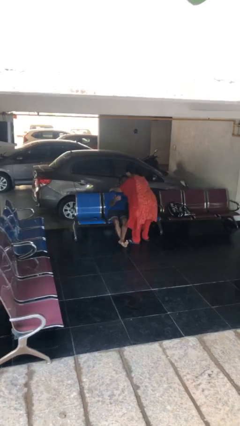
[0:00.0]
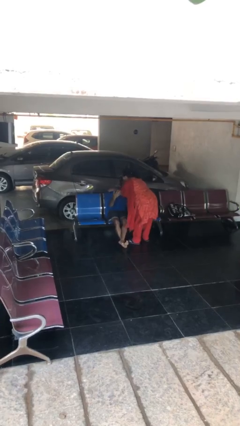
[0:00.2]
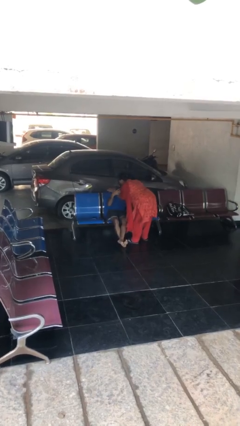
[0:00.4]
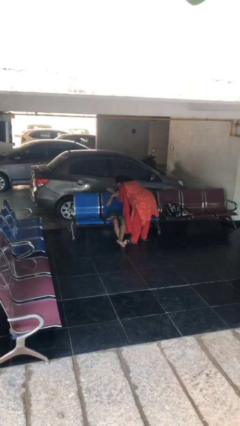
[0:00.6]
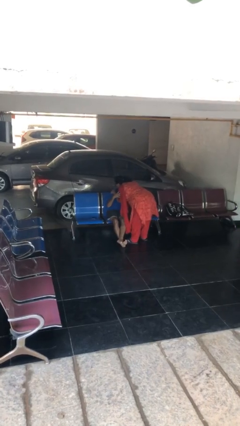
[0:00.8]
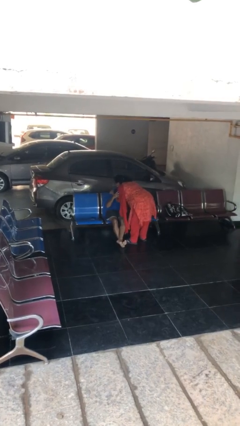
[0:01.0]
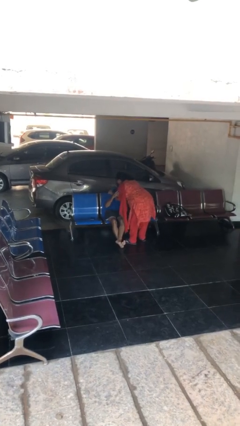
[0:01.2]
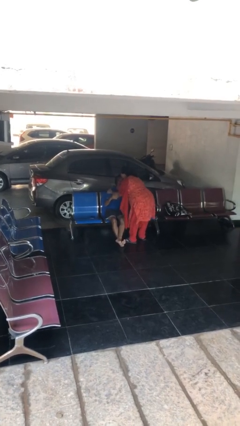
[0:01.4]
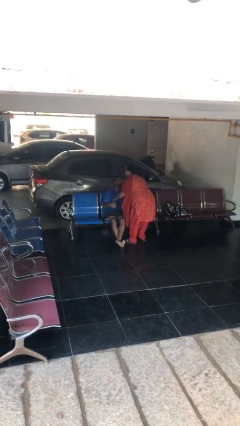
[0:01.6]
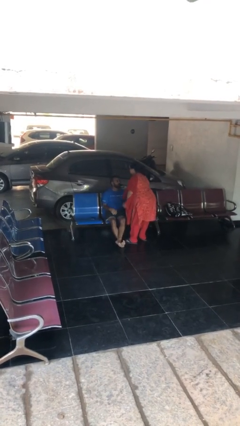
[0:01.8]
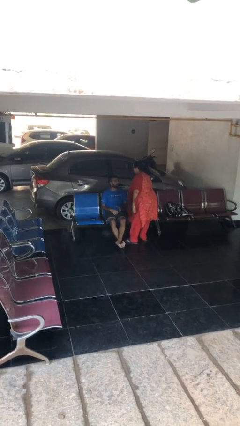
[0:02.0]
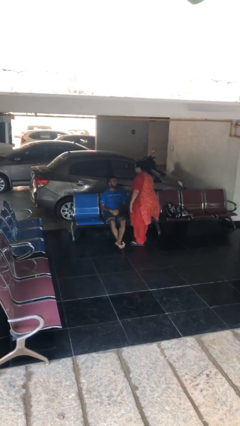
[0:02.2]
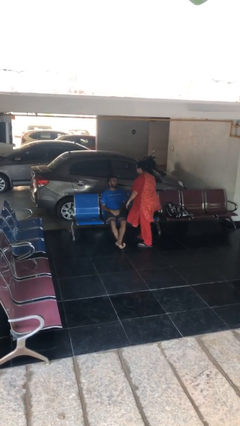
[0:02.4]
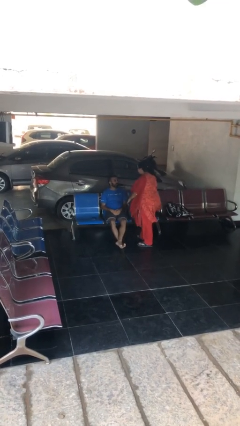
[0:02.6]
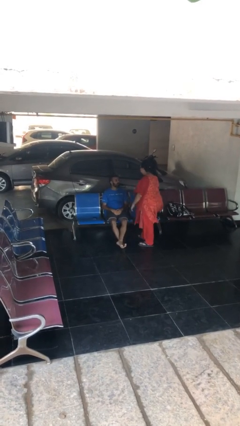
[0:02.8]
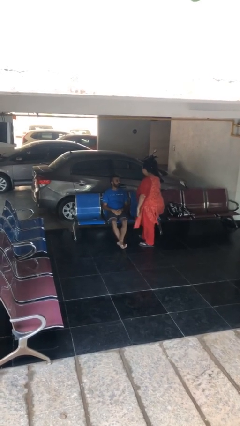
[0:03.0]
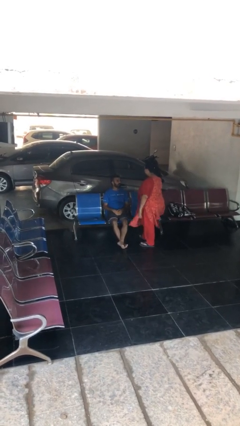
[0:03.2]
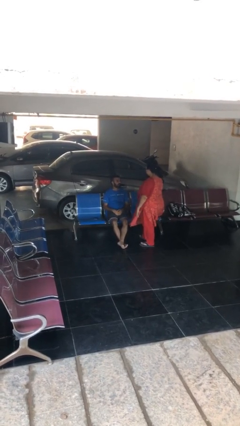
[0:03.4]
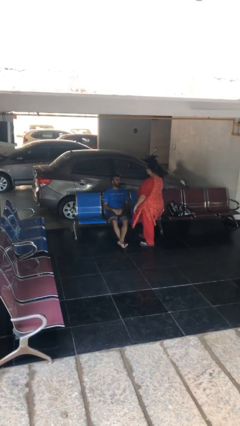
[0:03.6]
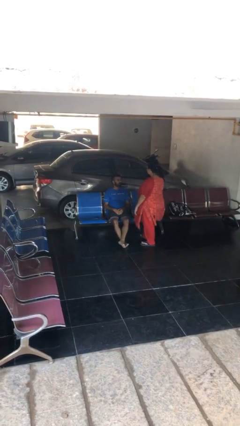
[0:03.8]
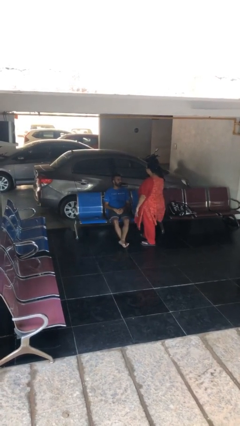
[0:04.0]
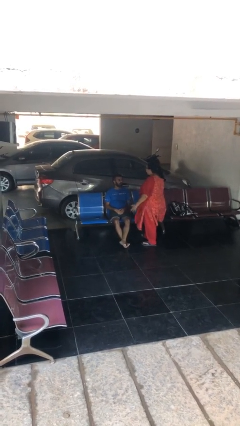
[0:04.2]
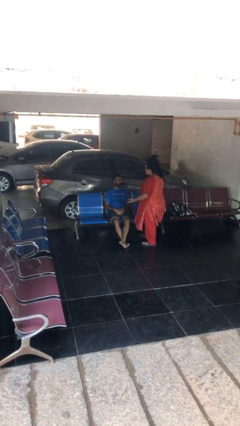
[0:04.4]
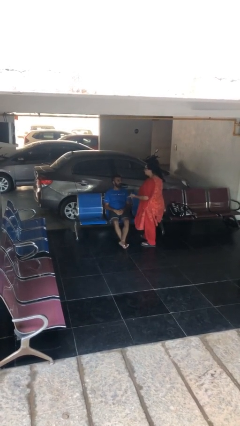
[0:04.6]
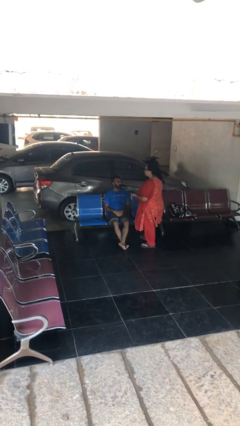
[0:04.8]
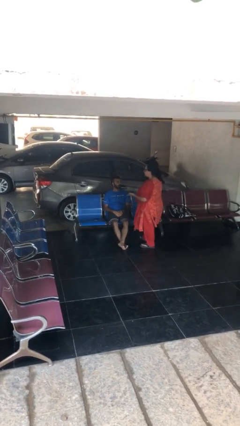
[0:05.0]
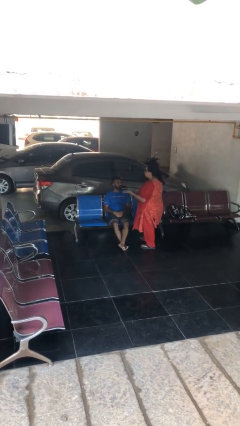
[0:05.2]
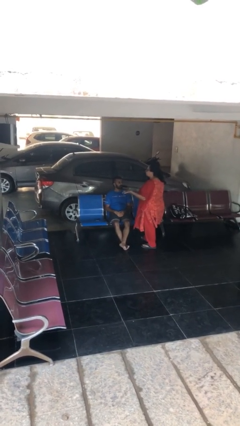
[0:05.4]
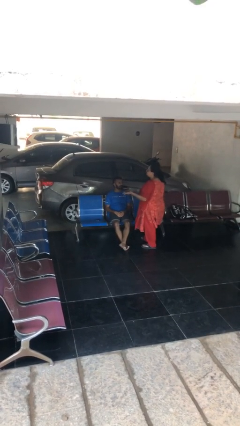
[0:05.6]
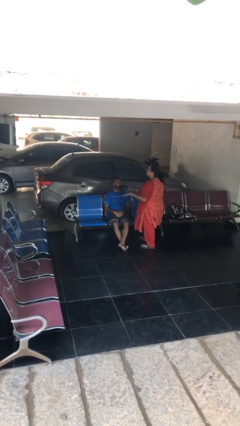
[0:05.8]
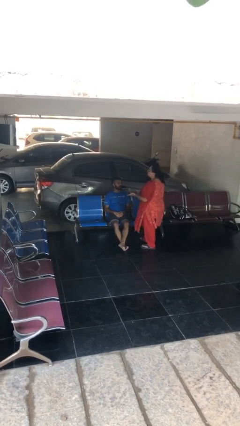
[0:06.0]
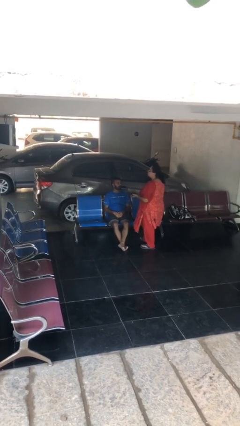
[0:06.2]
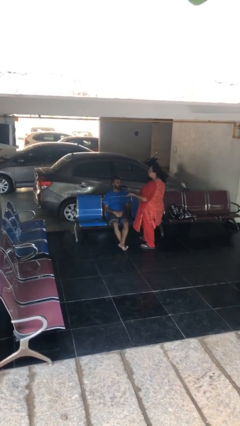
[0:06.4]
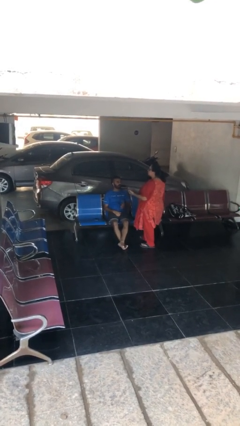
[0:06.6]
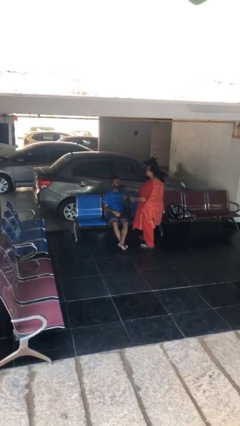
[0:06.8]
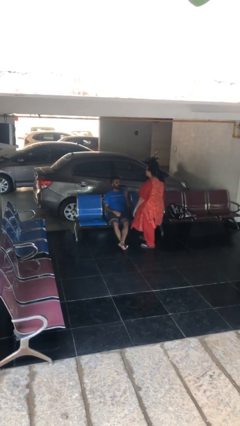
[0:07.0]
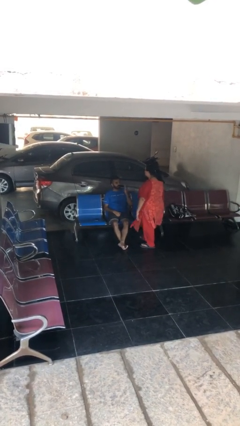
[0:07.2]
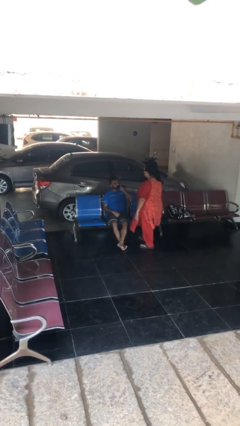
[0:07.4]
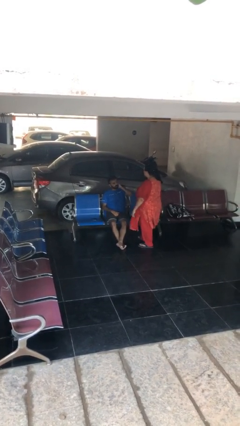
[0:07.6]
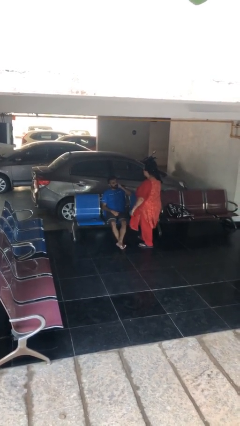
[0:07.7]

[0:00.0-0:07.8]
person embraces person

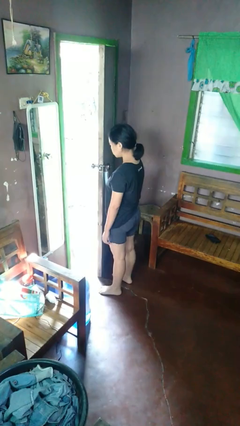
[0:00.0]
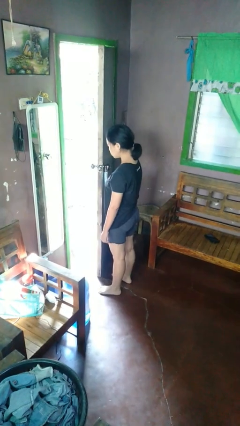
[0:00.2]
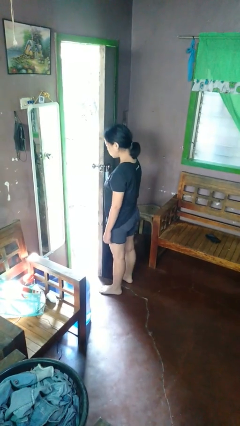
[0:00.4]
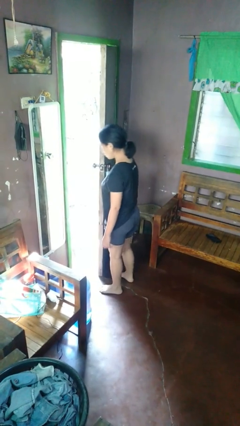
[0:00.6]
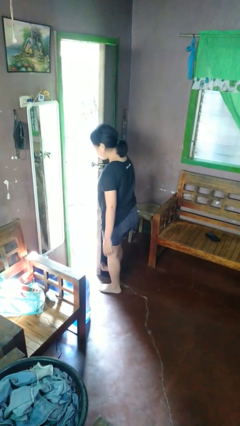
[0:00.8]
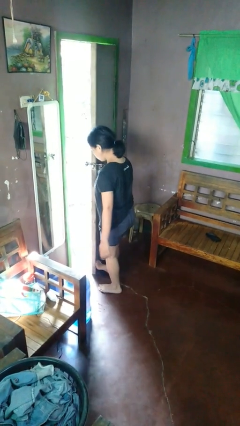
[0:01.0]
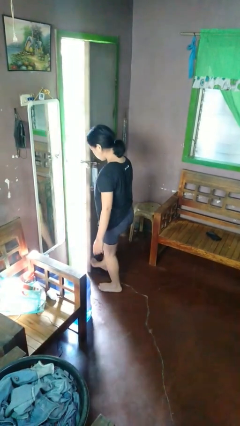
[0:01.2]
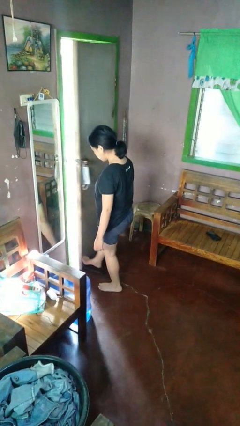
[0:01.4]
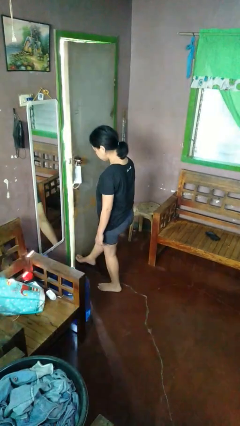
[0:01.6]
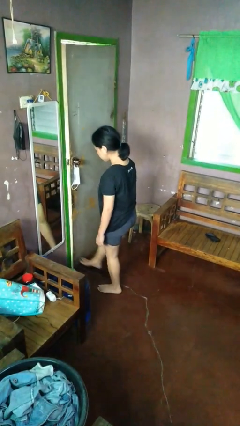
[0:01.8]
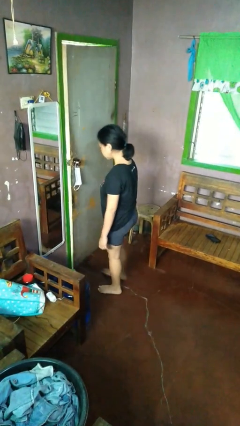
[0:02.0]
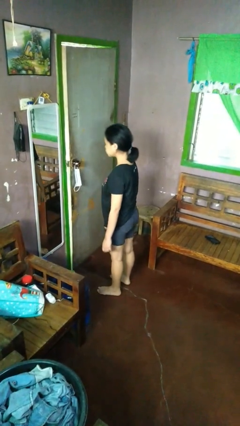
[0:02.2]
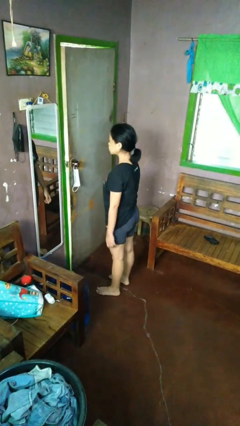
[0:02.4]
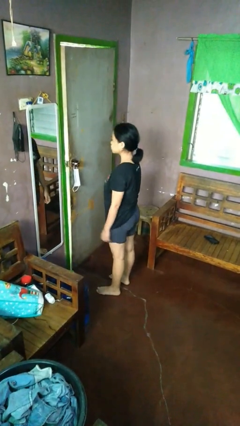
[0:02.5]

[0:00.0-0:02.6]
person closes door with foot

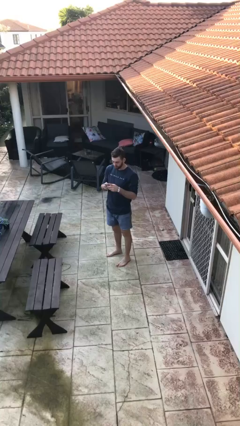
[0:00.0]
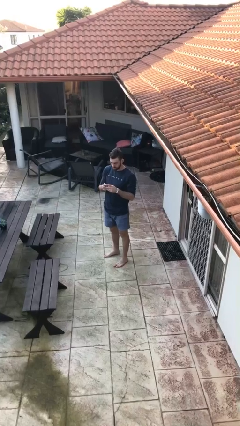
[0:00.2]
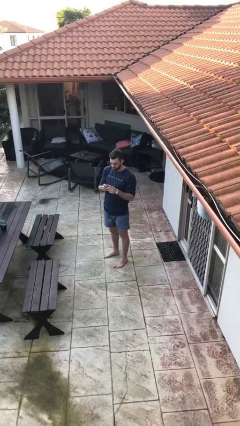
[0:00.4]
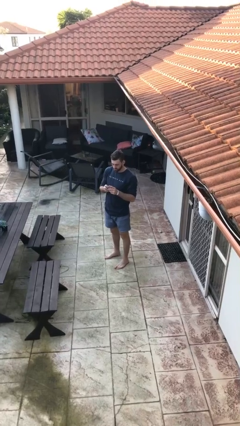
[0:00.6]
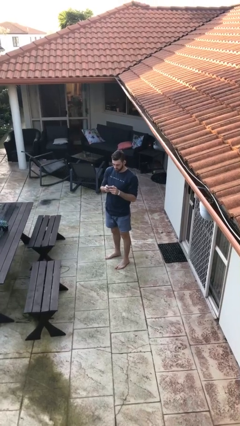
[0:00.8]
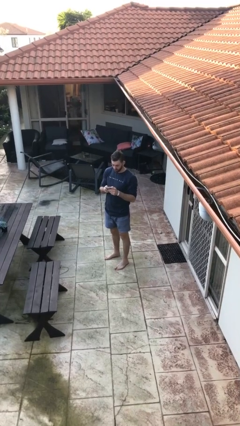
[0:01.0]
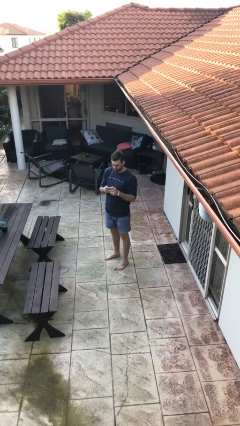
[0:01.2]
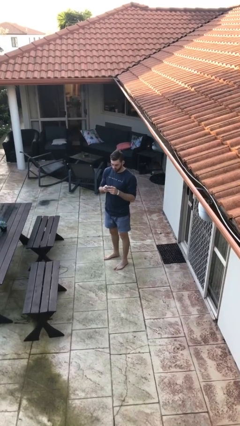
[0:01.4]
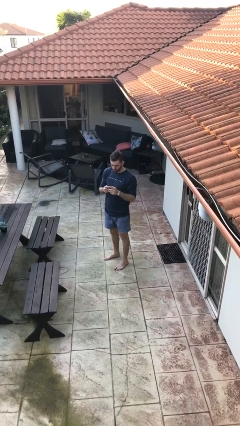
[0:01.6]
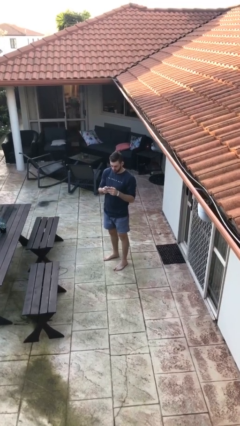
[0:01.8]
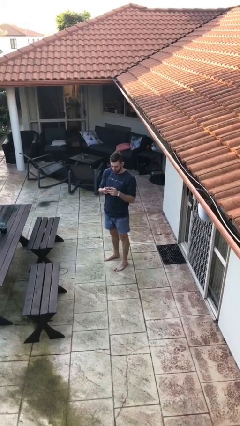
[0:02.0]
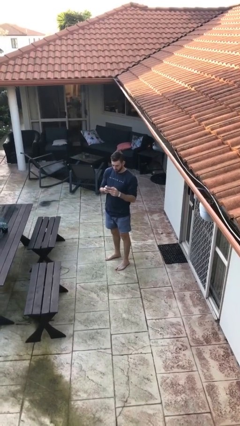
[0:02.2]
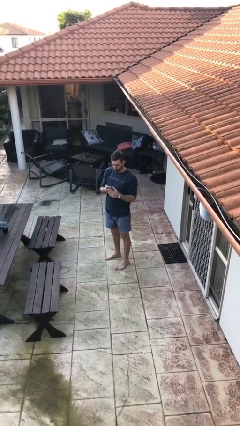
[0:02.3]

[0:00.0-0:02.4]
person texts on phone

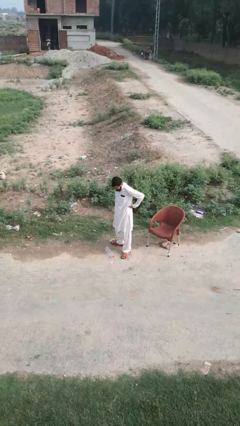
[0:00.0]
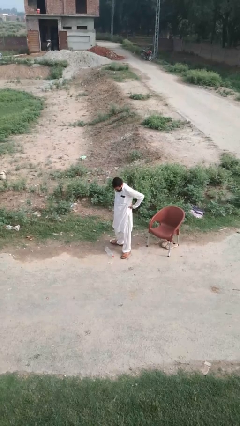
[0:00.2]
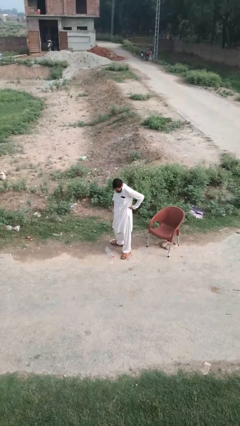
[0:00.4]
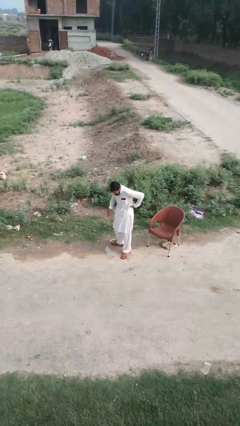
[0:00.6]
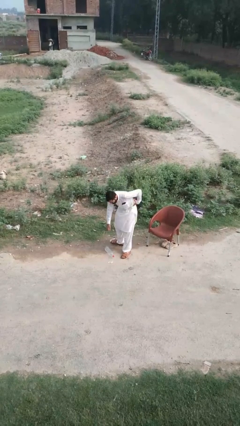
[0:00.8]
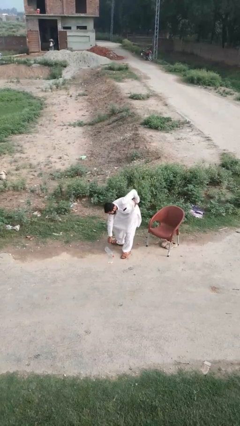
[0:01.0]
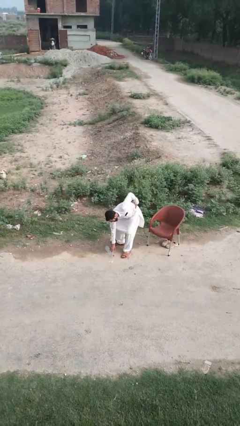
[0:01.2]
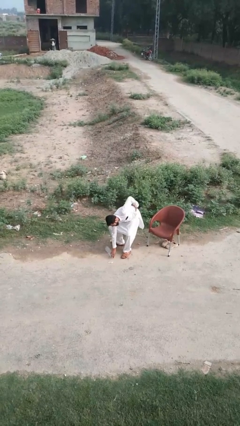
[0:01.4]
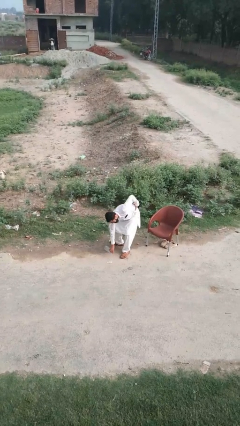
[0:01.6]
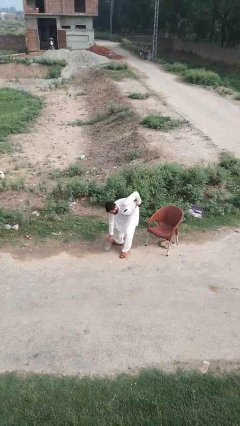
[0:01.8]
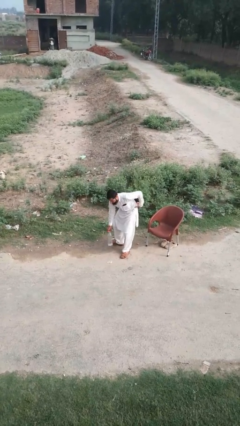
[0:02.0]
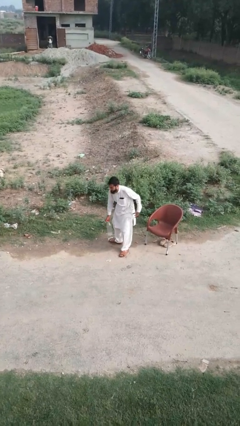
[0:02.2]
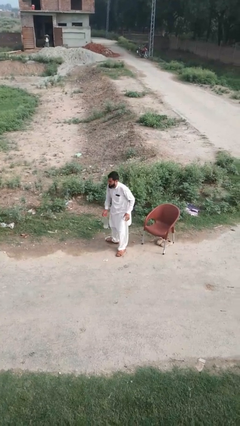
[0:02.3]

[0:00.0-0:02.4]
person picks up object from floor

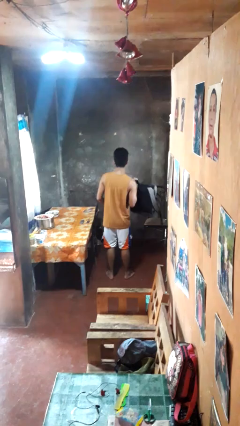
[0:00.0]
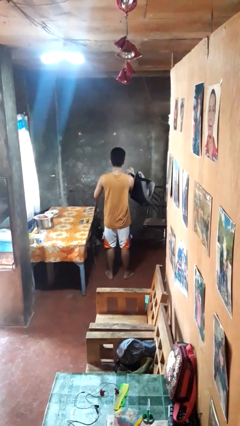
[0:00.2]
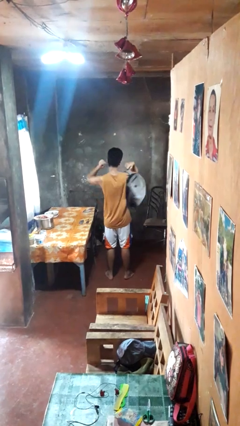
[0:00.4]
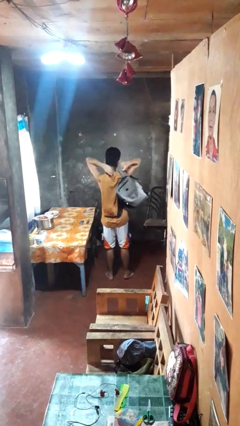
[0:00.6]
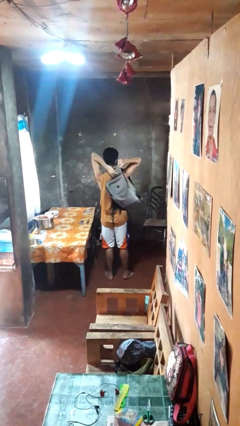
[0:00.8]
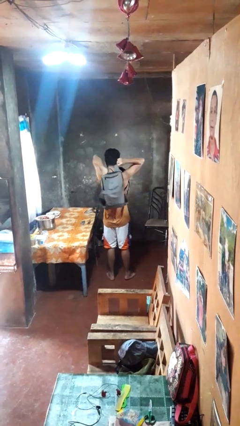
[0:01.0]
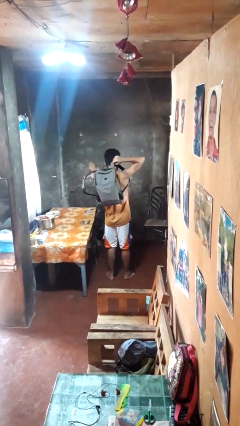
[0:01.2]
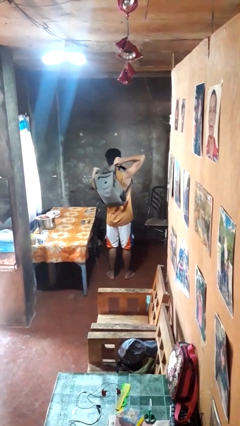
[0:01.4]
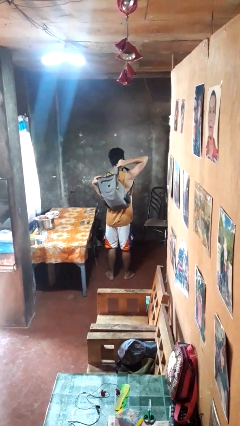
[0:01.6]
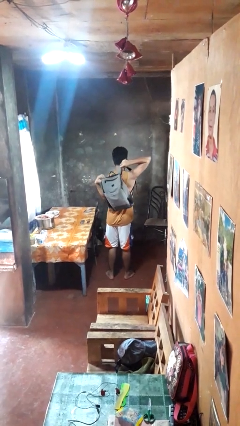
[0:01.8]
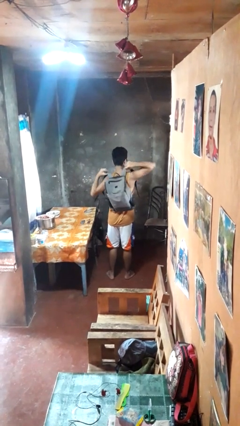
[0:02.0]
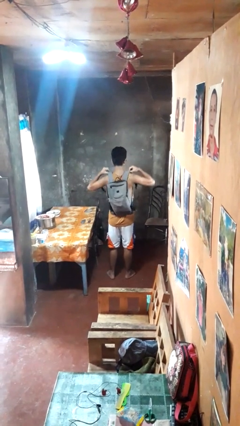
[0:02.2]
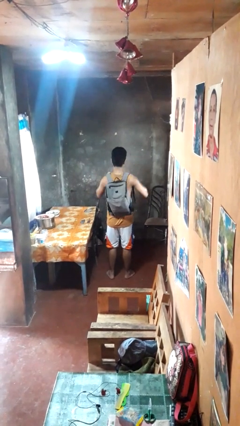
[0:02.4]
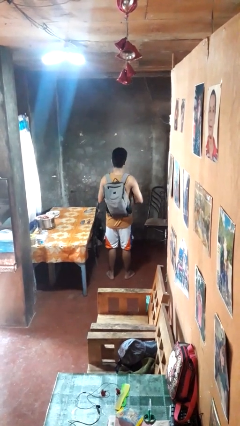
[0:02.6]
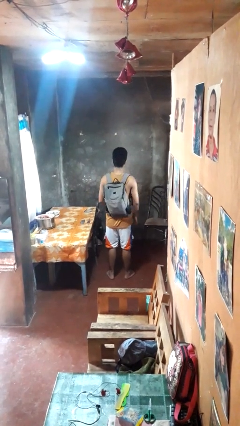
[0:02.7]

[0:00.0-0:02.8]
person puts on backpack
